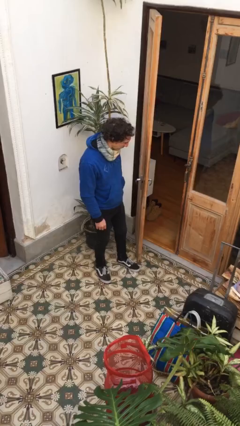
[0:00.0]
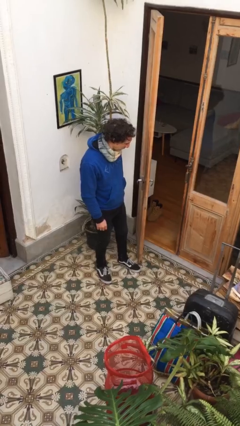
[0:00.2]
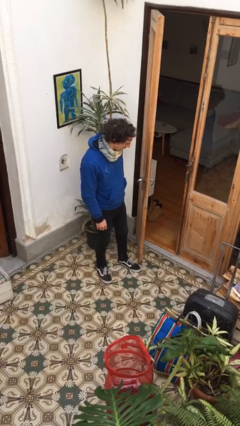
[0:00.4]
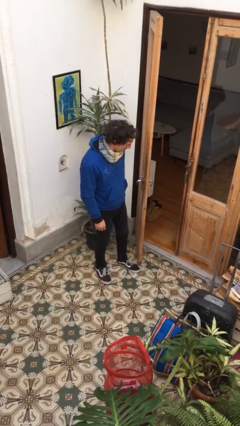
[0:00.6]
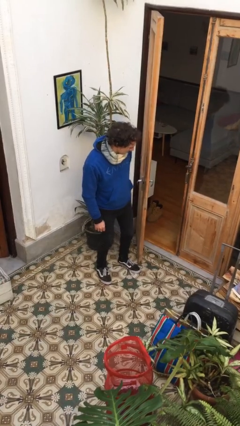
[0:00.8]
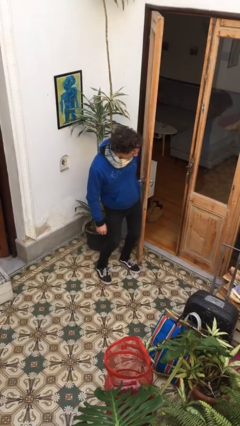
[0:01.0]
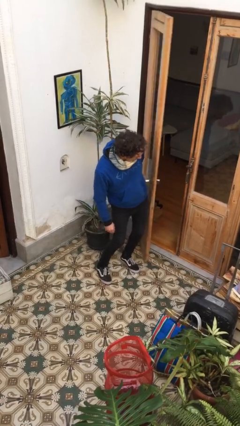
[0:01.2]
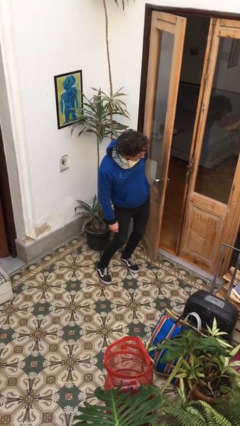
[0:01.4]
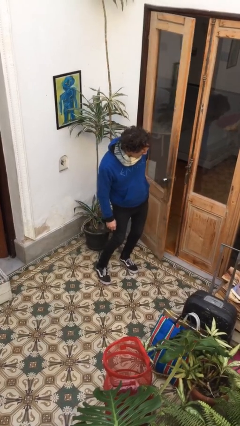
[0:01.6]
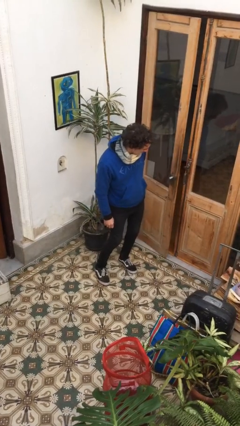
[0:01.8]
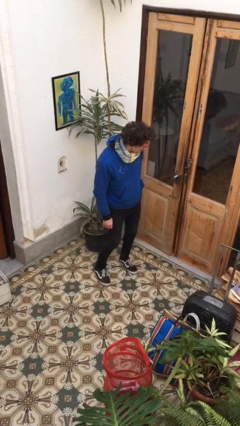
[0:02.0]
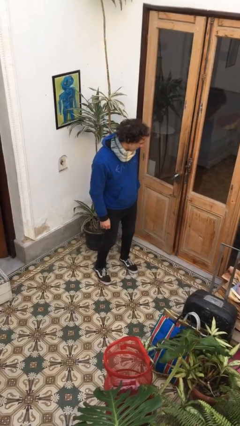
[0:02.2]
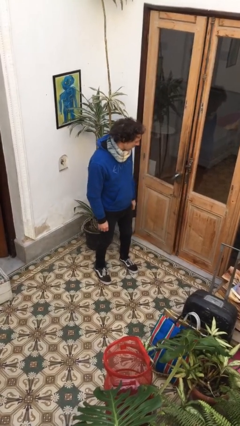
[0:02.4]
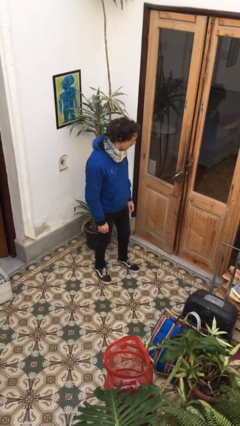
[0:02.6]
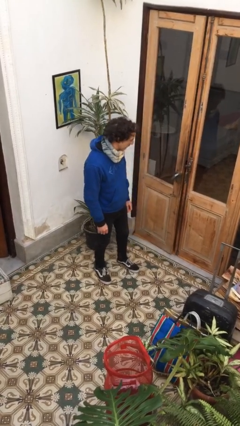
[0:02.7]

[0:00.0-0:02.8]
person closes door with hip

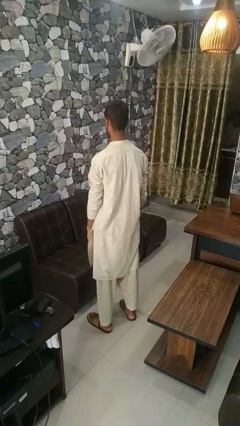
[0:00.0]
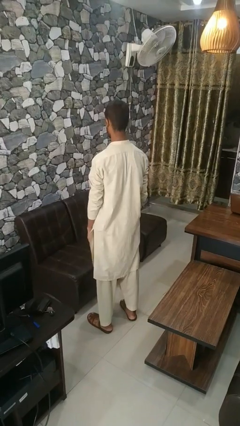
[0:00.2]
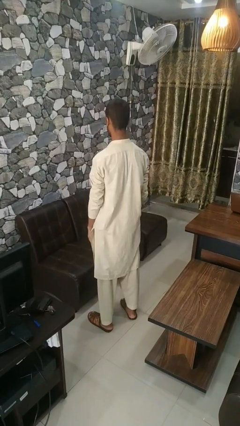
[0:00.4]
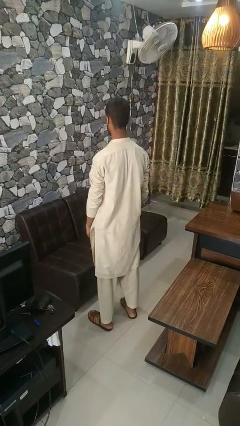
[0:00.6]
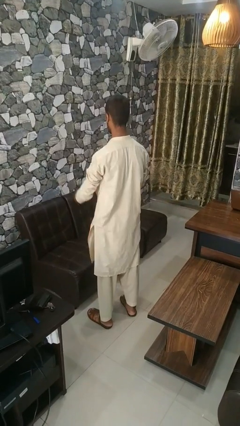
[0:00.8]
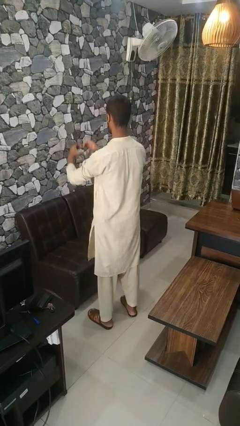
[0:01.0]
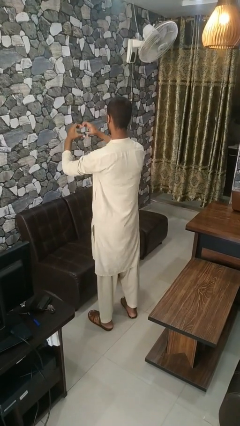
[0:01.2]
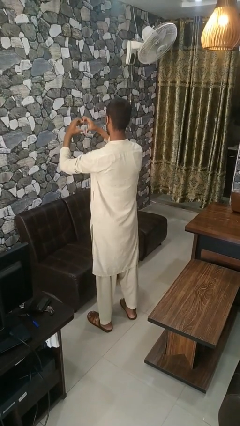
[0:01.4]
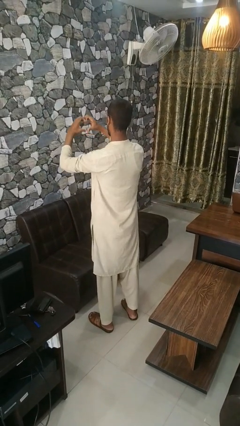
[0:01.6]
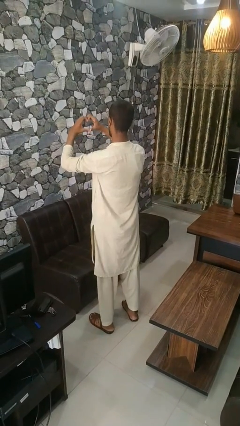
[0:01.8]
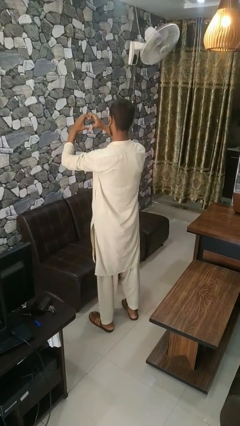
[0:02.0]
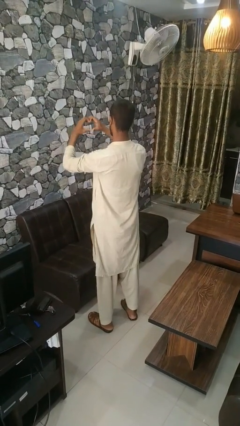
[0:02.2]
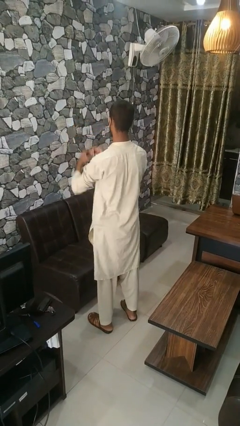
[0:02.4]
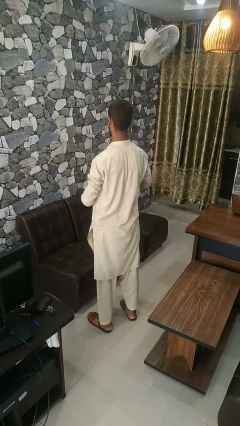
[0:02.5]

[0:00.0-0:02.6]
person gestures heart

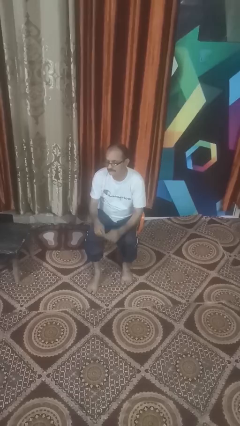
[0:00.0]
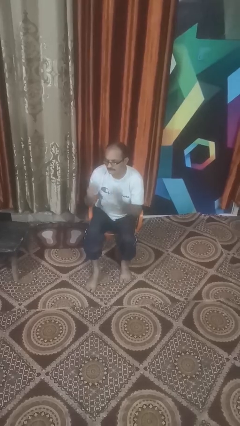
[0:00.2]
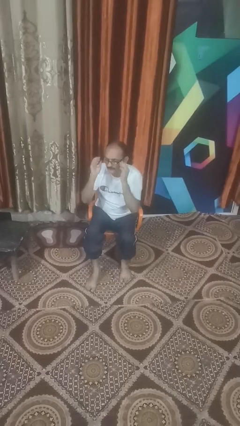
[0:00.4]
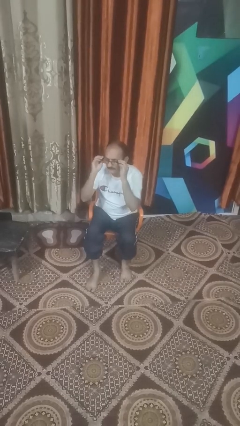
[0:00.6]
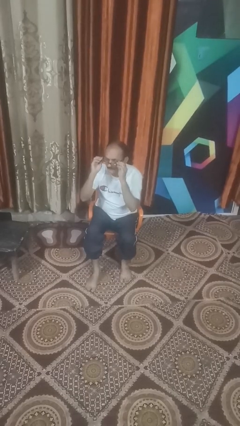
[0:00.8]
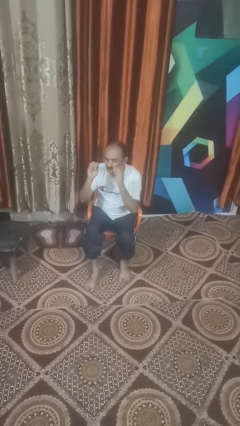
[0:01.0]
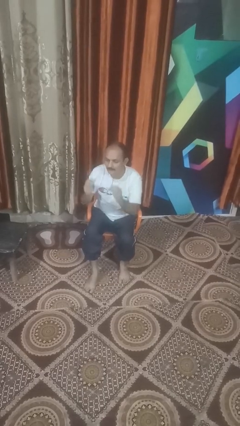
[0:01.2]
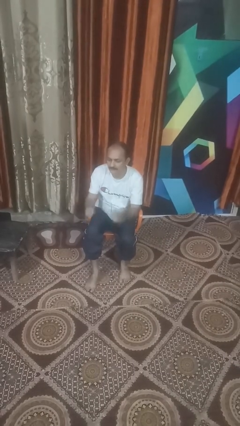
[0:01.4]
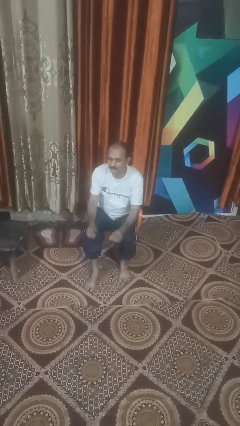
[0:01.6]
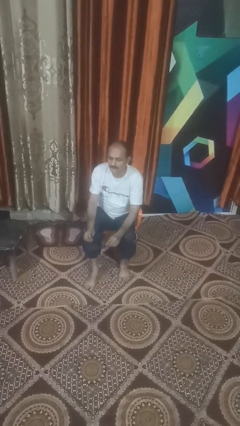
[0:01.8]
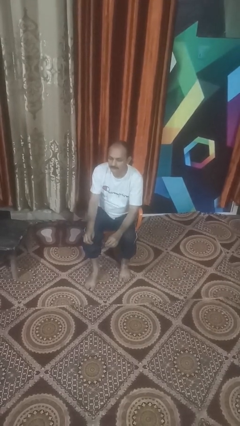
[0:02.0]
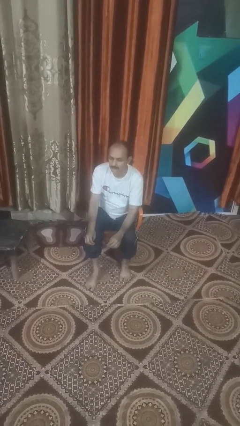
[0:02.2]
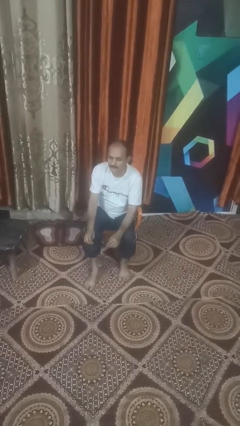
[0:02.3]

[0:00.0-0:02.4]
person takes off glasses

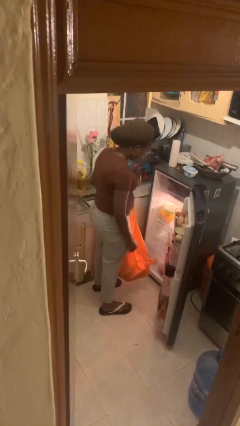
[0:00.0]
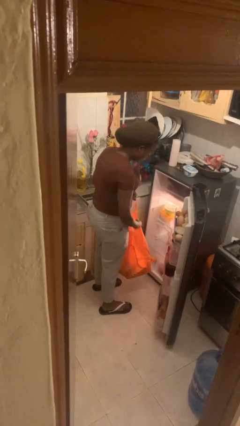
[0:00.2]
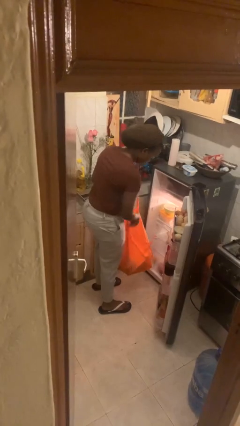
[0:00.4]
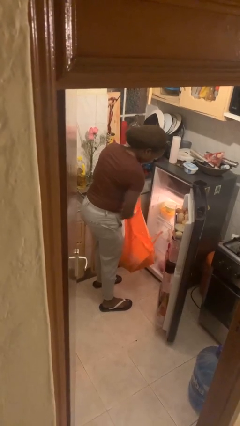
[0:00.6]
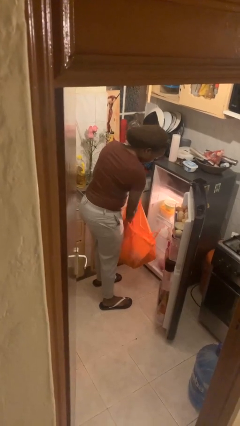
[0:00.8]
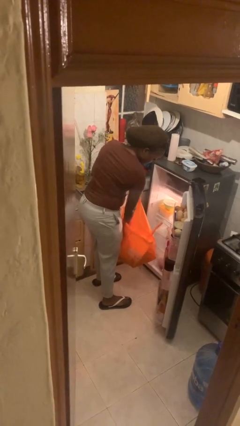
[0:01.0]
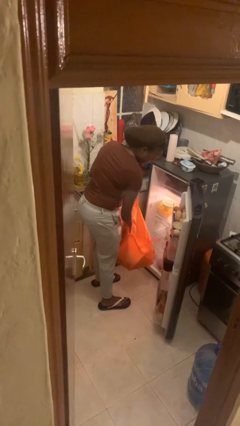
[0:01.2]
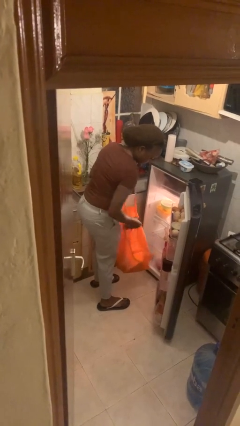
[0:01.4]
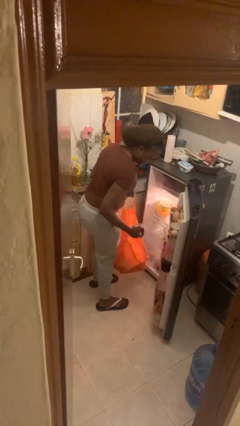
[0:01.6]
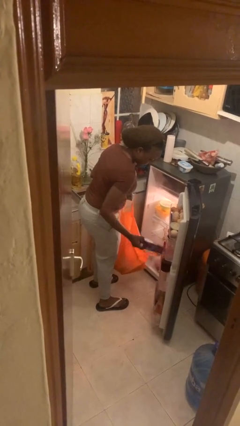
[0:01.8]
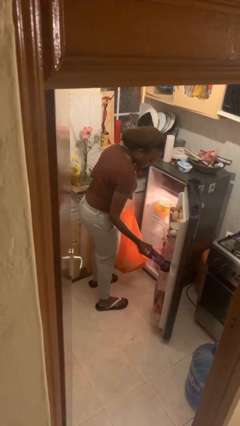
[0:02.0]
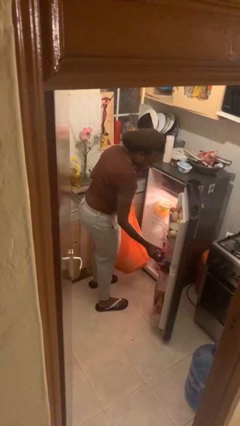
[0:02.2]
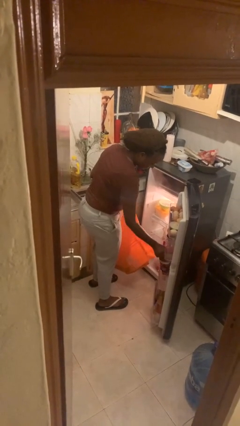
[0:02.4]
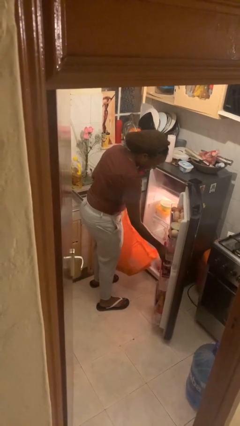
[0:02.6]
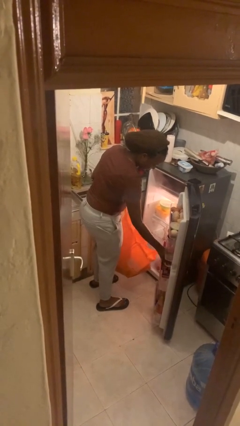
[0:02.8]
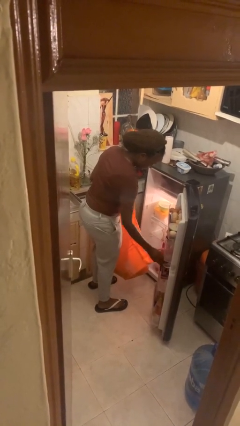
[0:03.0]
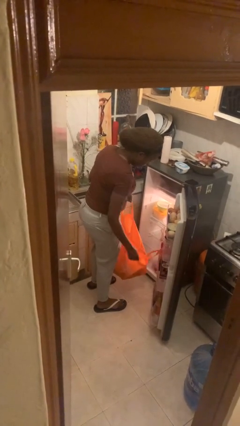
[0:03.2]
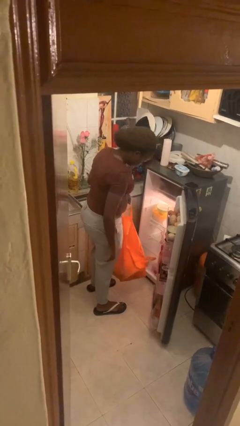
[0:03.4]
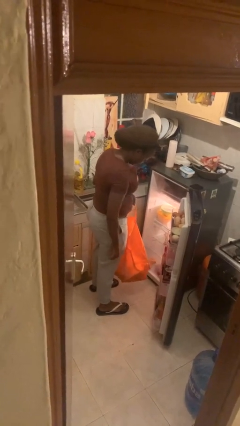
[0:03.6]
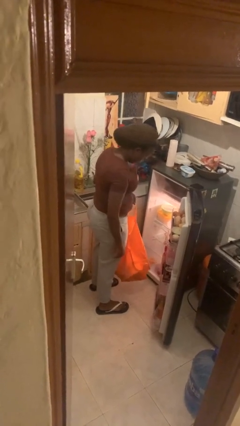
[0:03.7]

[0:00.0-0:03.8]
person loads groceries into refrigerator

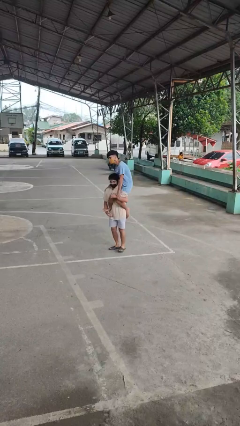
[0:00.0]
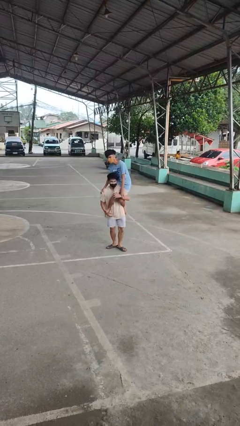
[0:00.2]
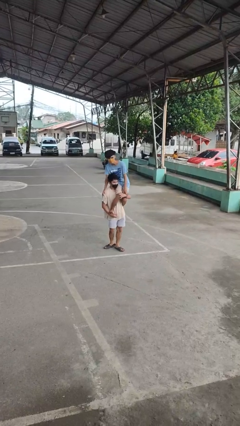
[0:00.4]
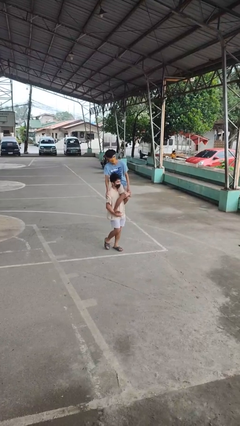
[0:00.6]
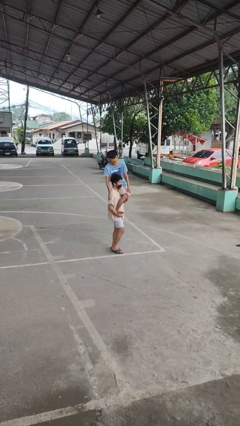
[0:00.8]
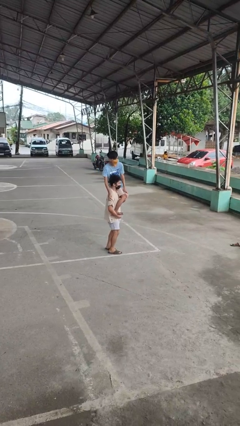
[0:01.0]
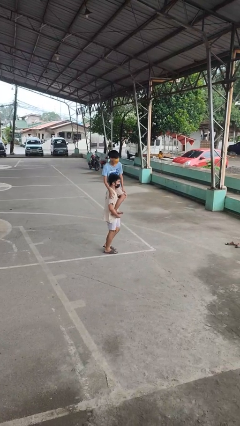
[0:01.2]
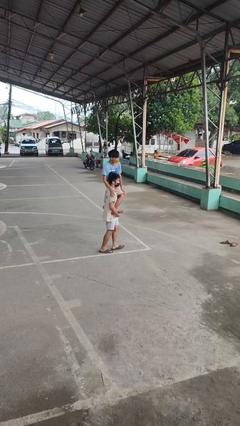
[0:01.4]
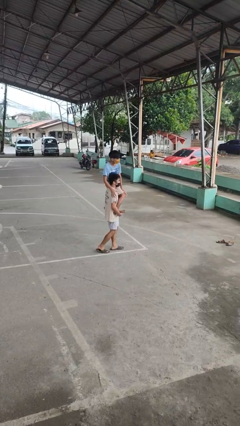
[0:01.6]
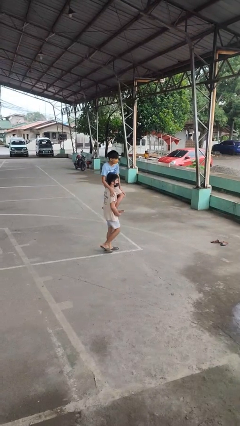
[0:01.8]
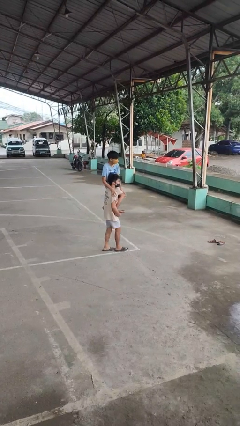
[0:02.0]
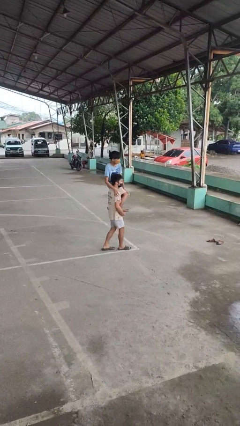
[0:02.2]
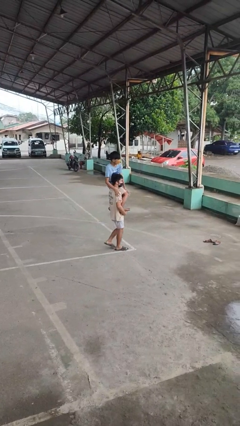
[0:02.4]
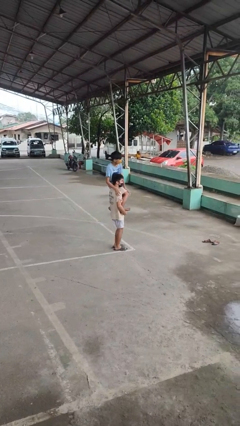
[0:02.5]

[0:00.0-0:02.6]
person carries person on shoulders

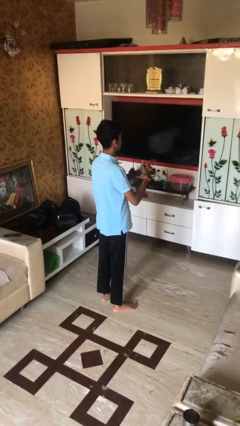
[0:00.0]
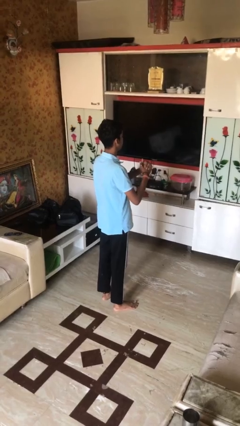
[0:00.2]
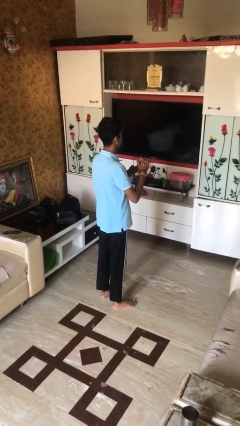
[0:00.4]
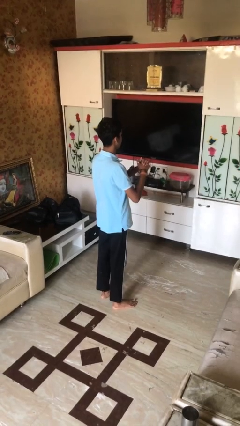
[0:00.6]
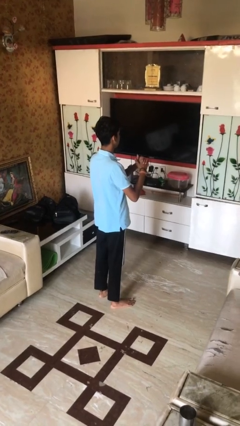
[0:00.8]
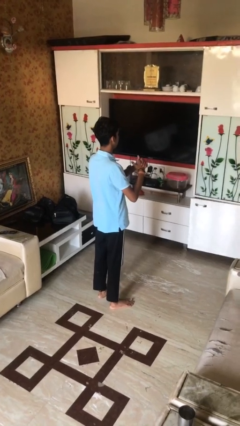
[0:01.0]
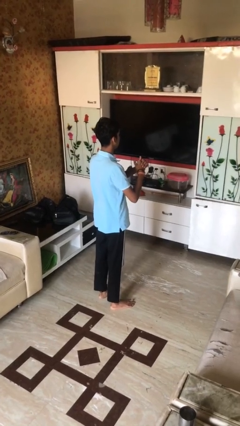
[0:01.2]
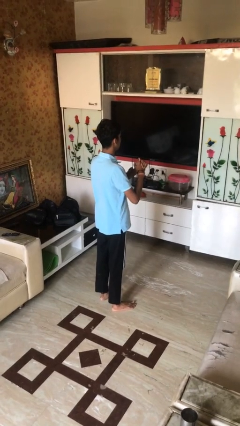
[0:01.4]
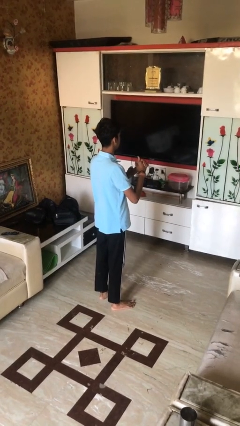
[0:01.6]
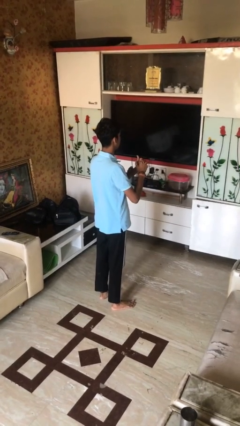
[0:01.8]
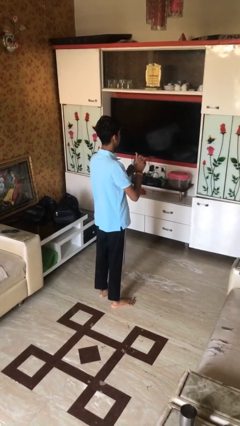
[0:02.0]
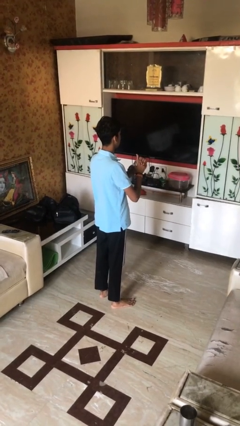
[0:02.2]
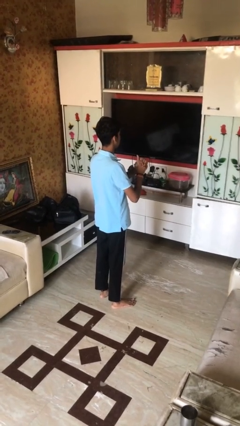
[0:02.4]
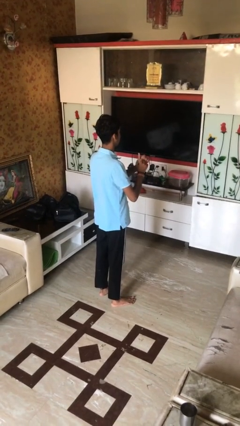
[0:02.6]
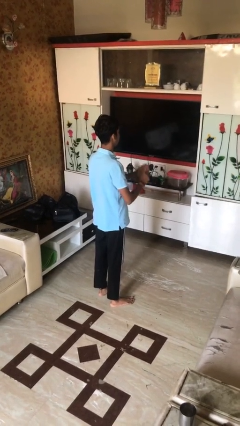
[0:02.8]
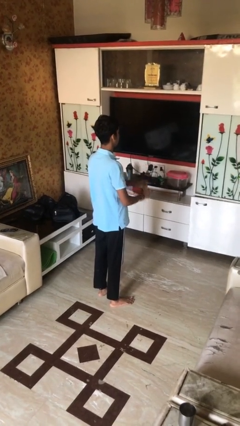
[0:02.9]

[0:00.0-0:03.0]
person cracks knuckles
